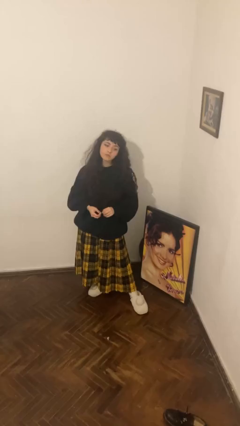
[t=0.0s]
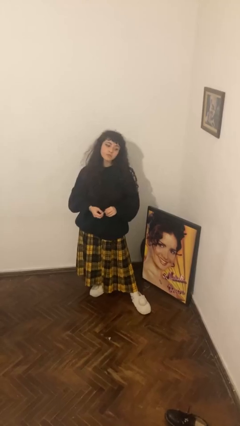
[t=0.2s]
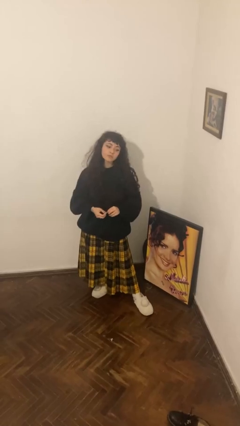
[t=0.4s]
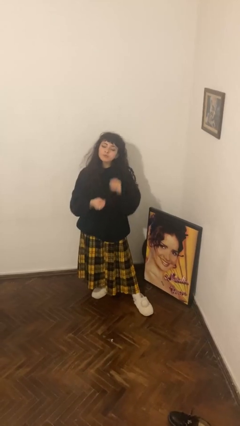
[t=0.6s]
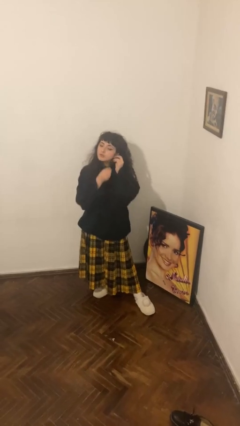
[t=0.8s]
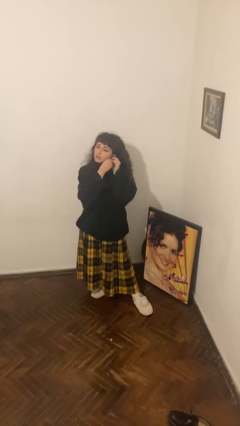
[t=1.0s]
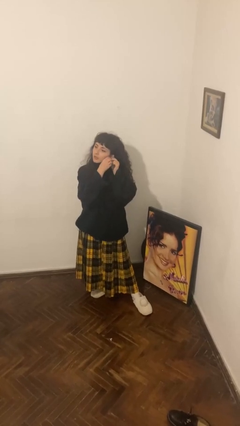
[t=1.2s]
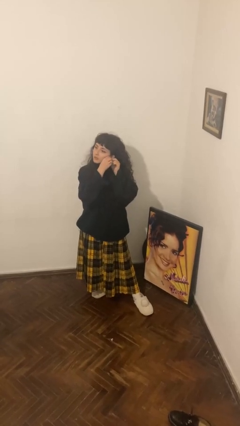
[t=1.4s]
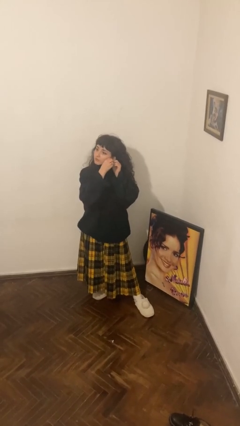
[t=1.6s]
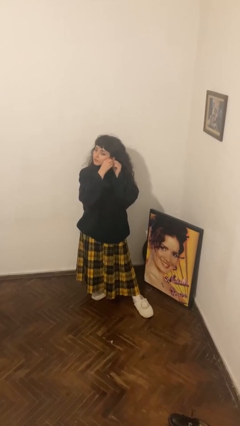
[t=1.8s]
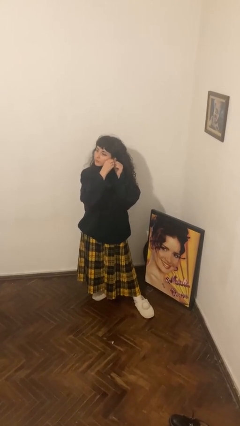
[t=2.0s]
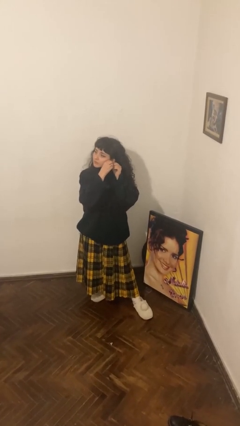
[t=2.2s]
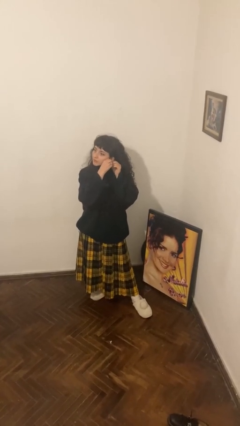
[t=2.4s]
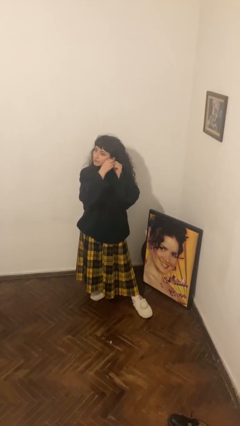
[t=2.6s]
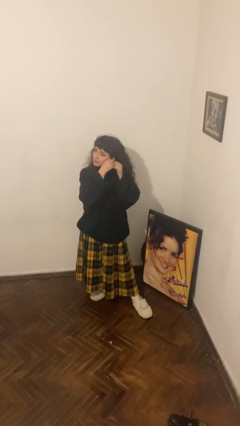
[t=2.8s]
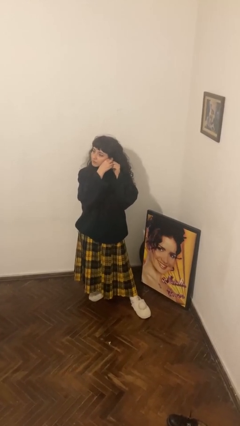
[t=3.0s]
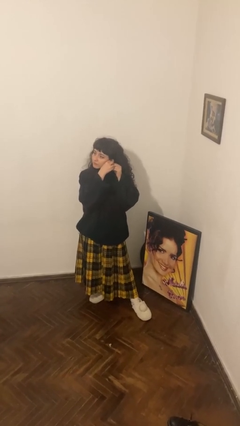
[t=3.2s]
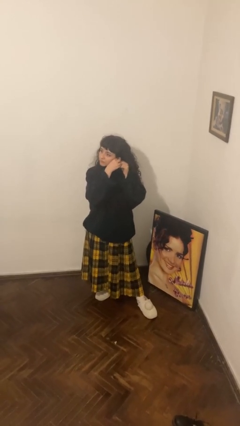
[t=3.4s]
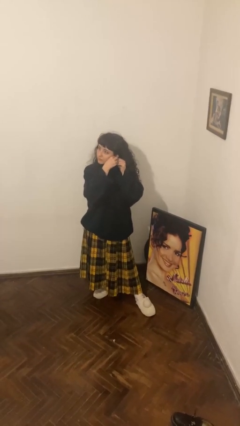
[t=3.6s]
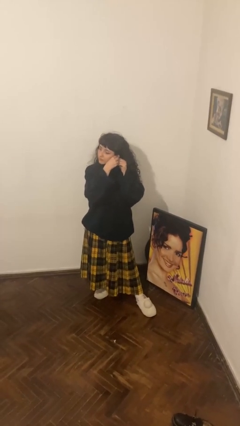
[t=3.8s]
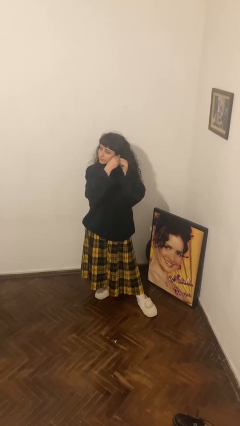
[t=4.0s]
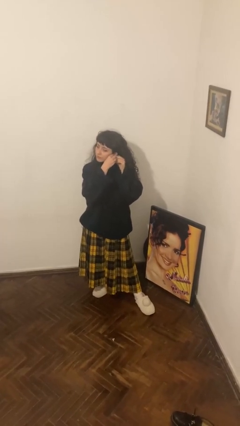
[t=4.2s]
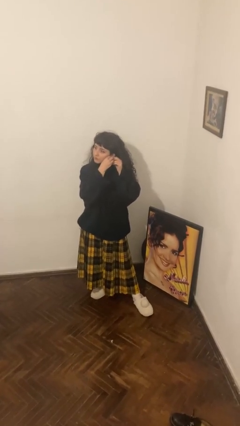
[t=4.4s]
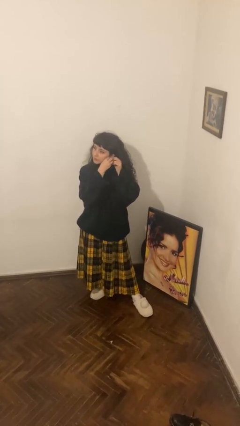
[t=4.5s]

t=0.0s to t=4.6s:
person puts on earrings

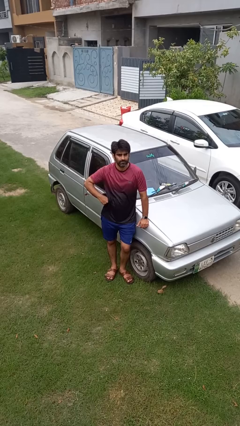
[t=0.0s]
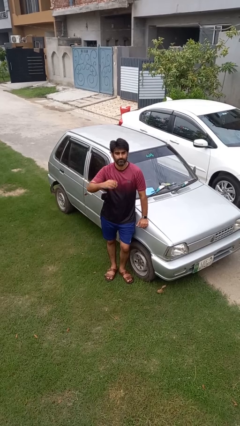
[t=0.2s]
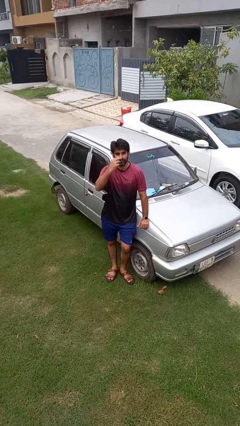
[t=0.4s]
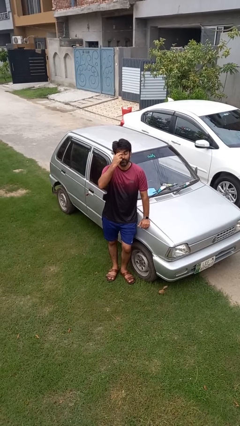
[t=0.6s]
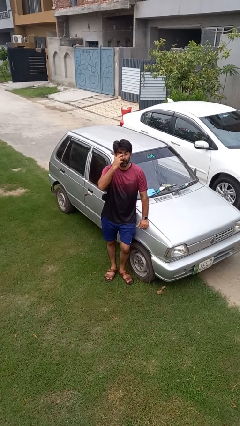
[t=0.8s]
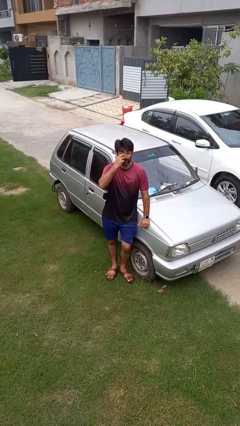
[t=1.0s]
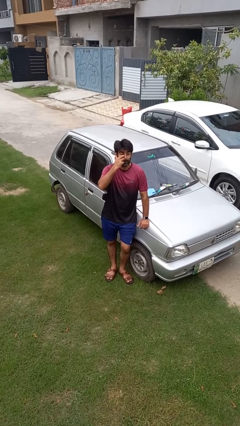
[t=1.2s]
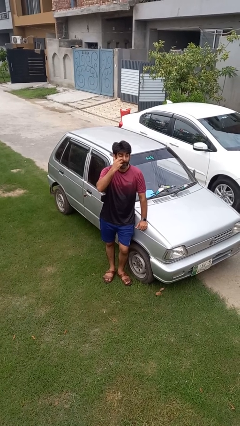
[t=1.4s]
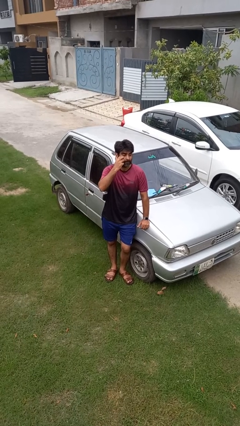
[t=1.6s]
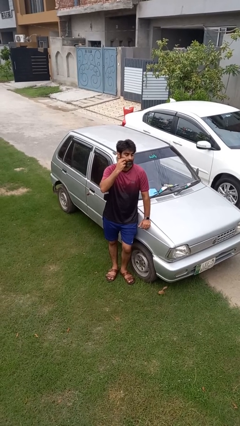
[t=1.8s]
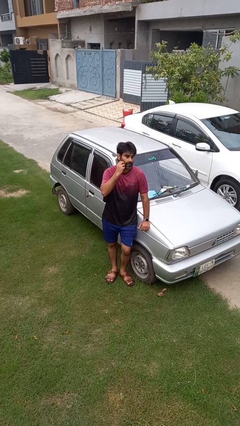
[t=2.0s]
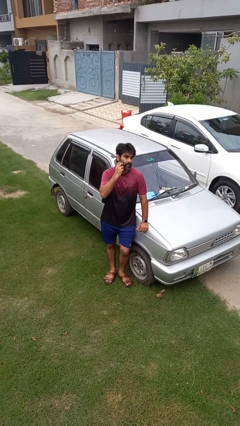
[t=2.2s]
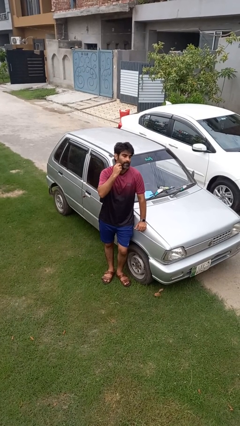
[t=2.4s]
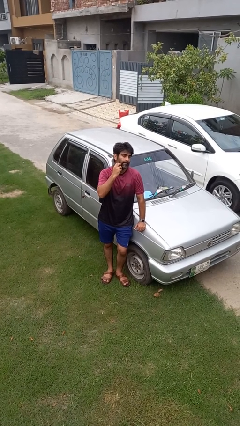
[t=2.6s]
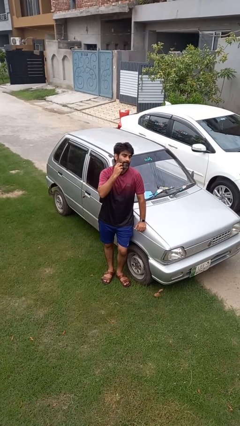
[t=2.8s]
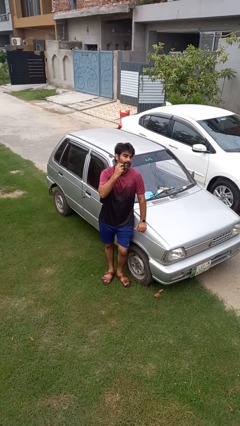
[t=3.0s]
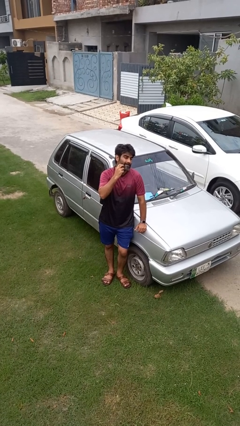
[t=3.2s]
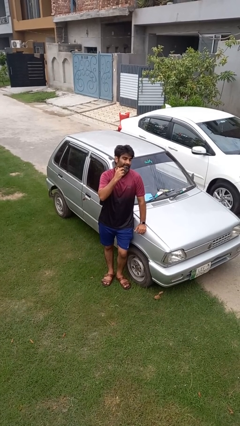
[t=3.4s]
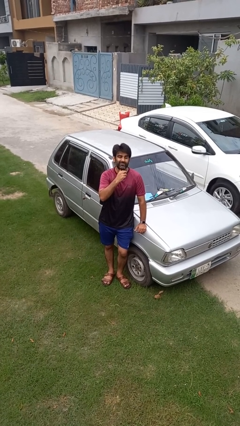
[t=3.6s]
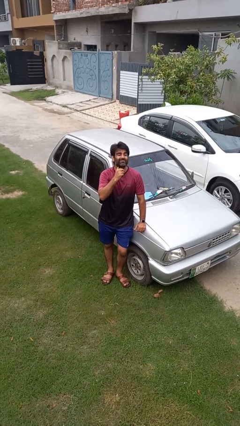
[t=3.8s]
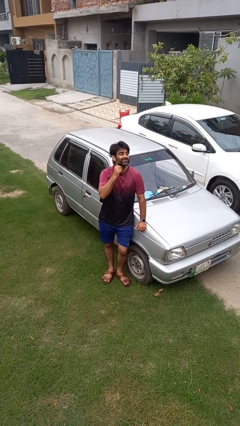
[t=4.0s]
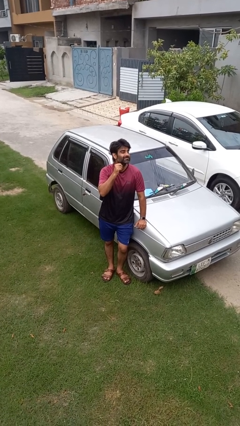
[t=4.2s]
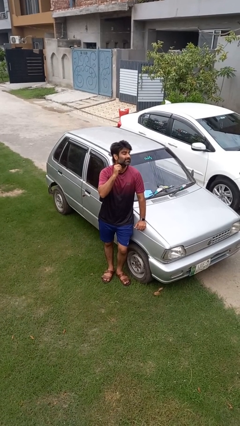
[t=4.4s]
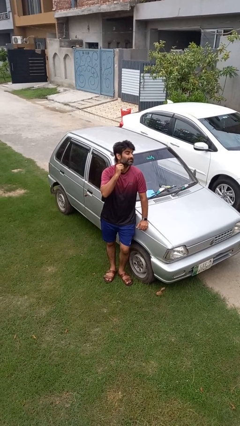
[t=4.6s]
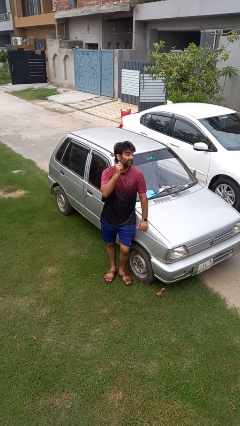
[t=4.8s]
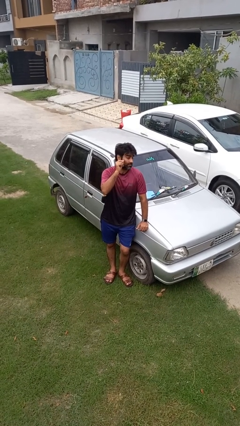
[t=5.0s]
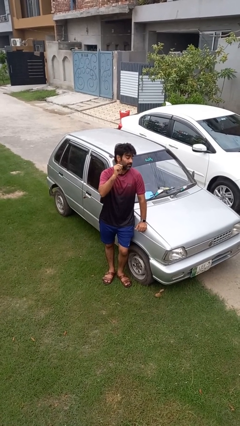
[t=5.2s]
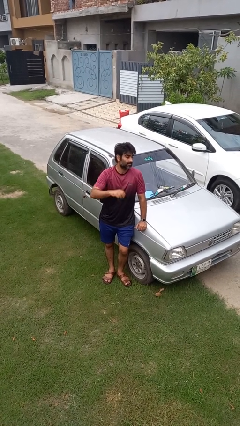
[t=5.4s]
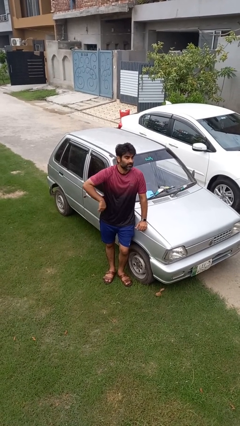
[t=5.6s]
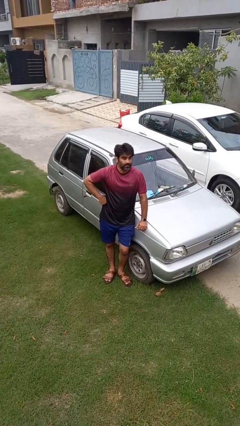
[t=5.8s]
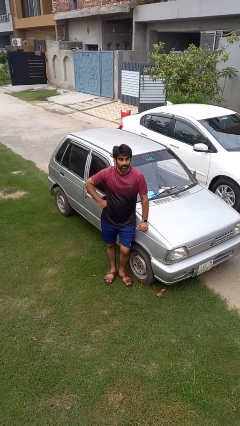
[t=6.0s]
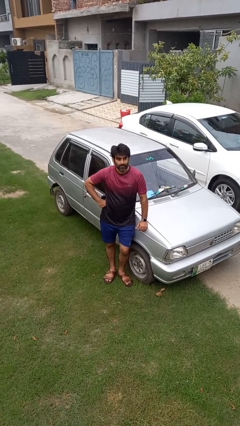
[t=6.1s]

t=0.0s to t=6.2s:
person scratches face

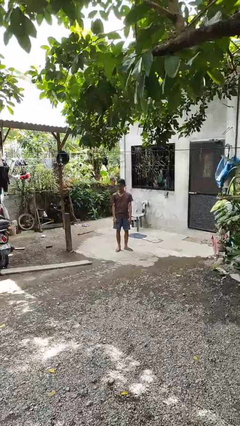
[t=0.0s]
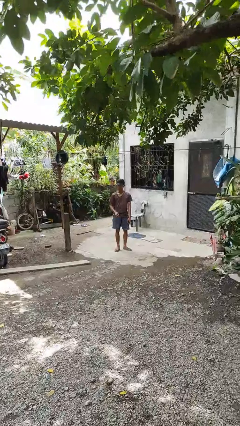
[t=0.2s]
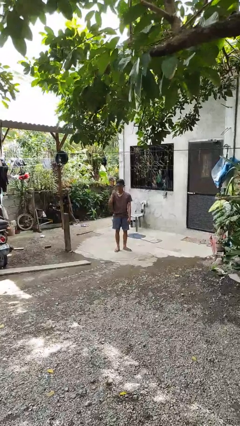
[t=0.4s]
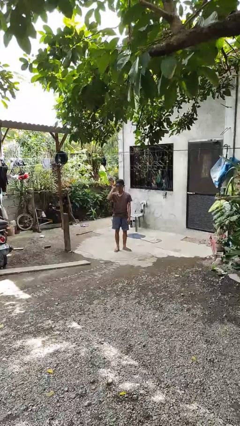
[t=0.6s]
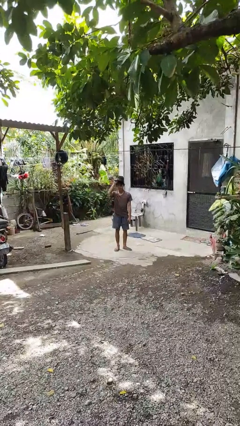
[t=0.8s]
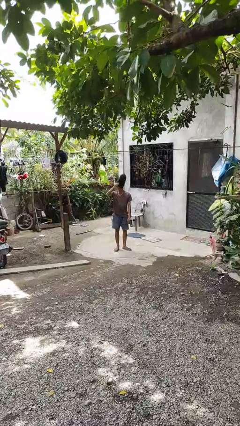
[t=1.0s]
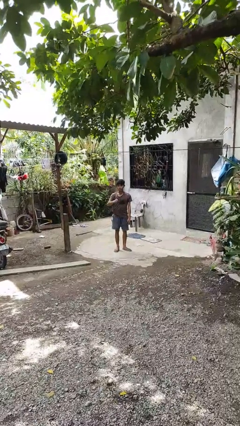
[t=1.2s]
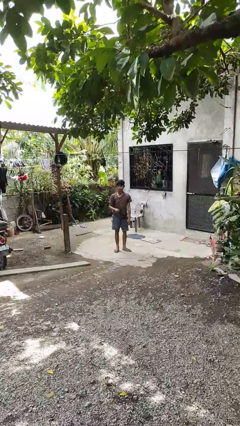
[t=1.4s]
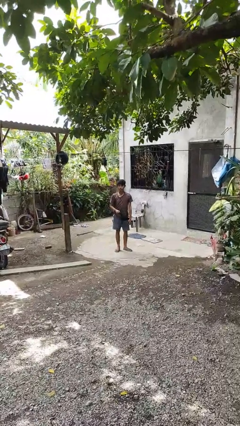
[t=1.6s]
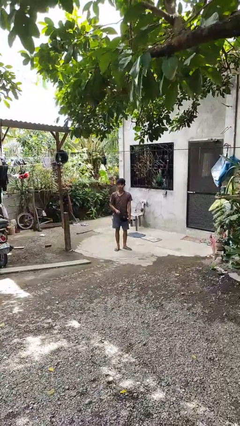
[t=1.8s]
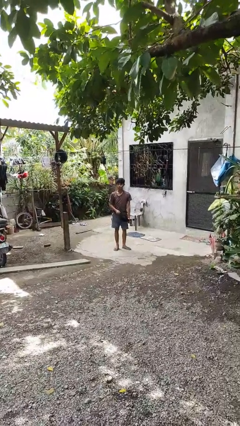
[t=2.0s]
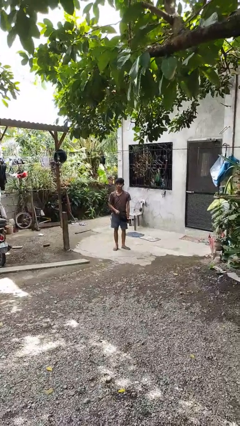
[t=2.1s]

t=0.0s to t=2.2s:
person takes off hat

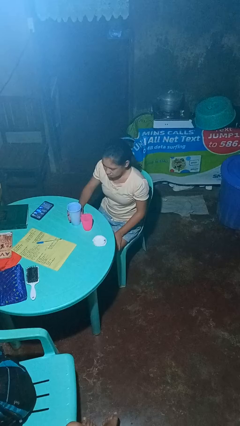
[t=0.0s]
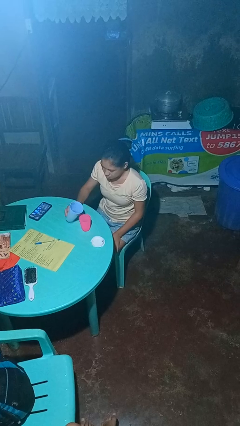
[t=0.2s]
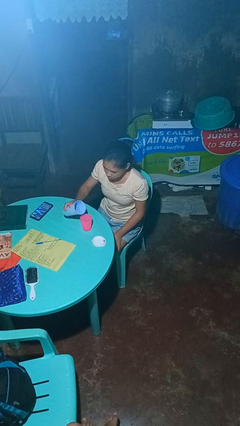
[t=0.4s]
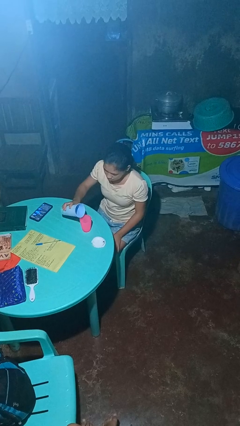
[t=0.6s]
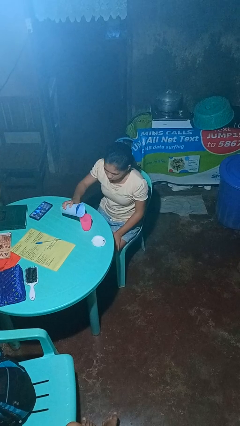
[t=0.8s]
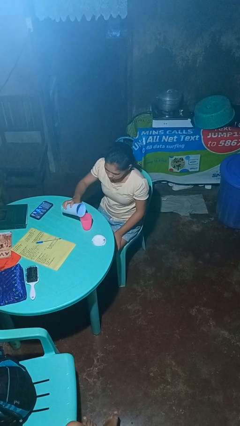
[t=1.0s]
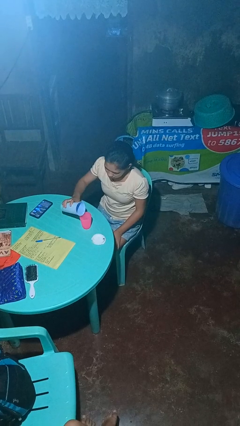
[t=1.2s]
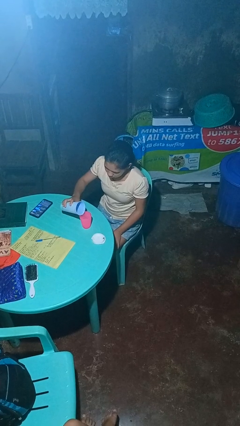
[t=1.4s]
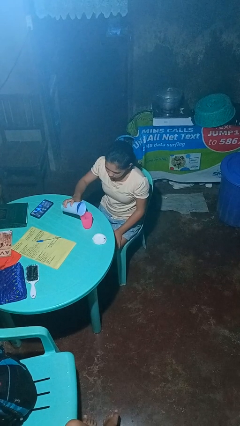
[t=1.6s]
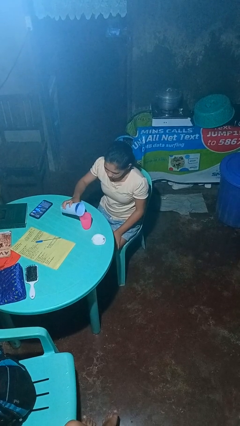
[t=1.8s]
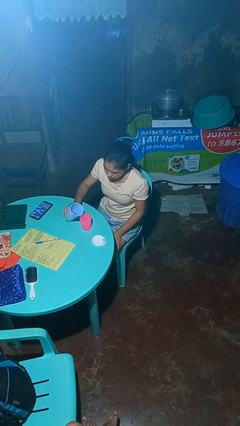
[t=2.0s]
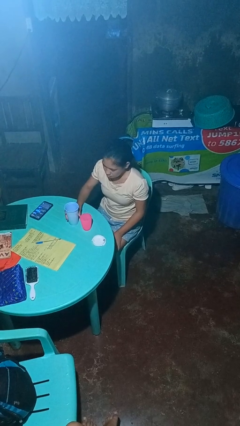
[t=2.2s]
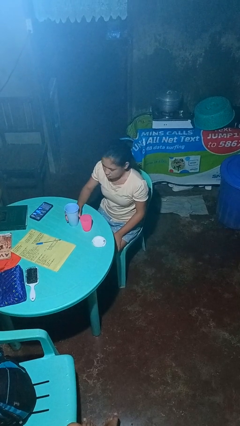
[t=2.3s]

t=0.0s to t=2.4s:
person pours liquid into cup

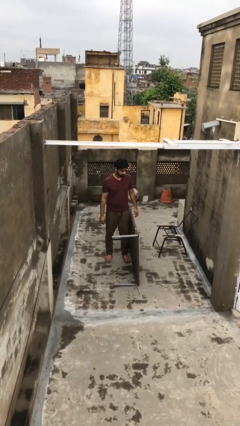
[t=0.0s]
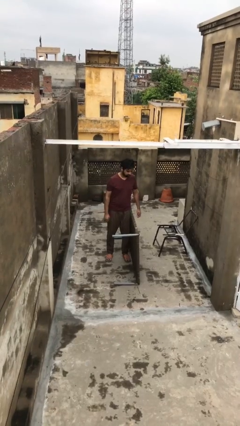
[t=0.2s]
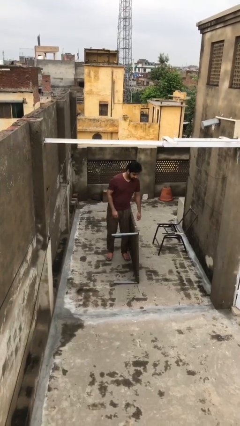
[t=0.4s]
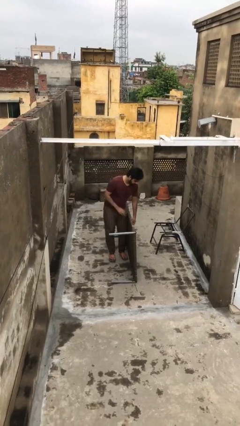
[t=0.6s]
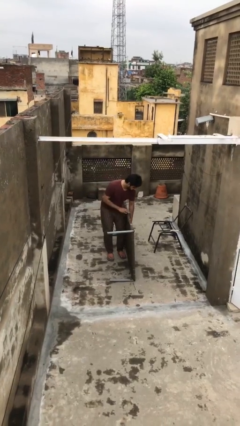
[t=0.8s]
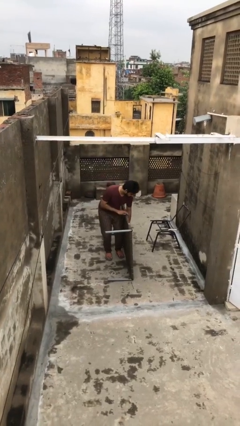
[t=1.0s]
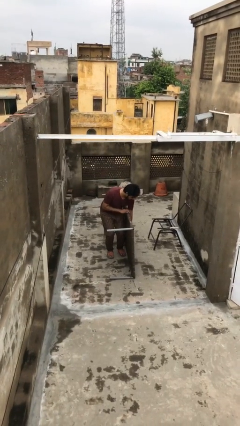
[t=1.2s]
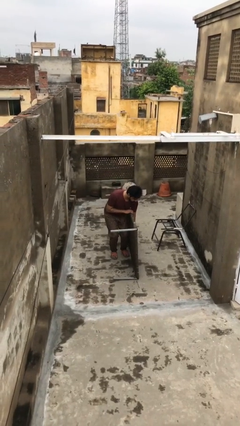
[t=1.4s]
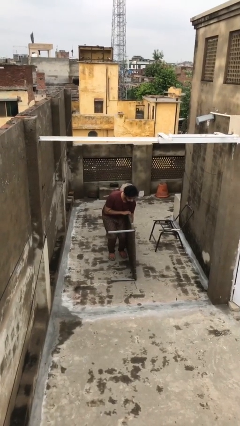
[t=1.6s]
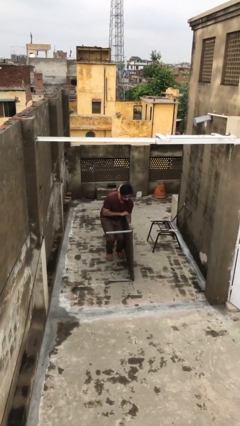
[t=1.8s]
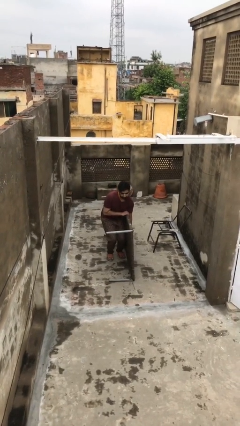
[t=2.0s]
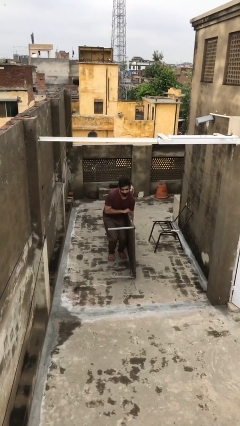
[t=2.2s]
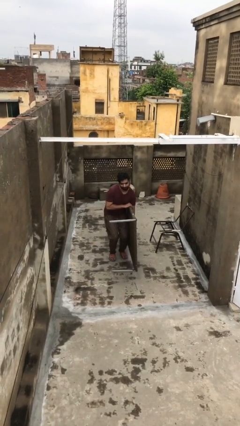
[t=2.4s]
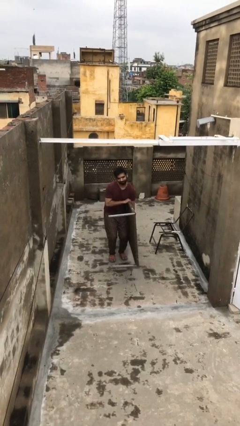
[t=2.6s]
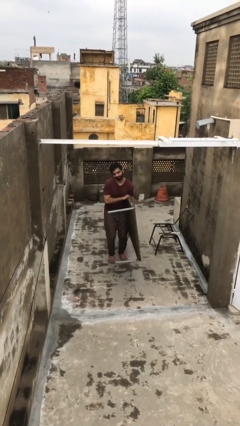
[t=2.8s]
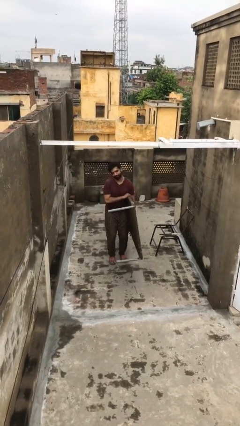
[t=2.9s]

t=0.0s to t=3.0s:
person picks up object from floor
